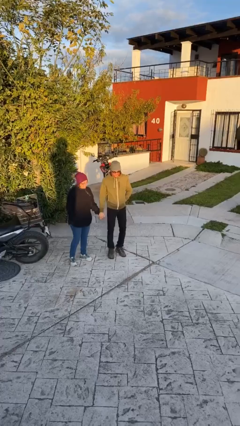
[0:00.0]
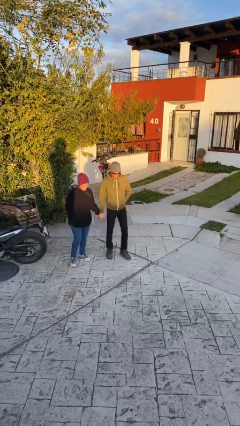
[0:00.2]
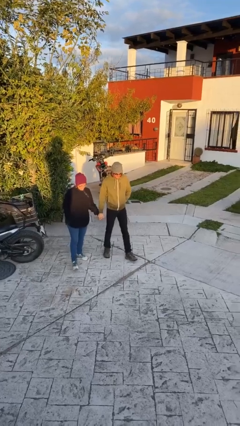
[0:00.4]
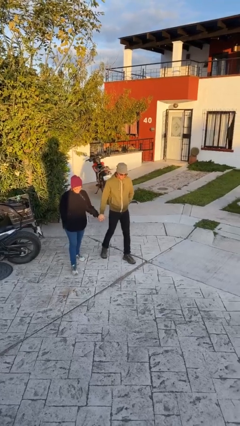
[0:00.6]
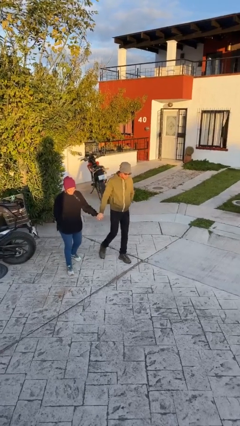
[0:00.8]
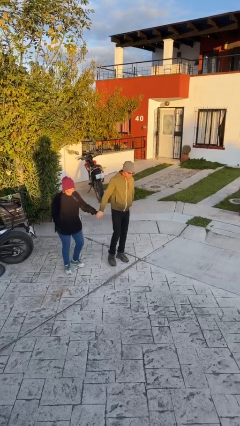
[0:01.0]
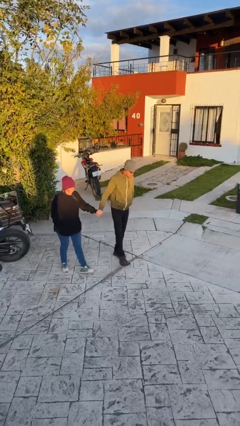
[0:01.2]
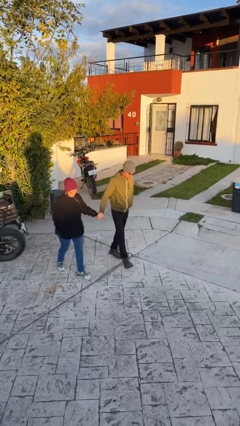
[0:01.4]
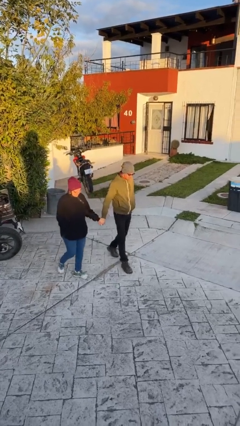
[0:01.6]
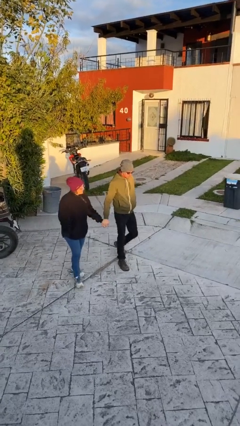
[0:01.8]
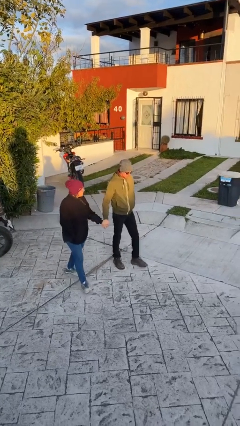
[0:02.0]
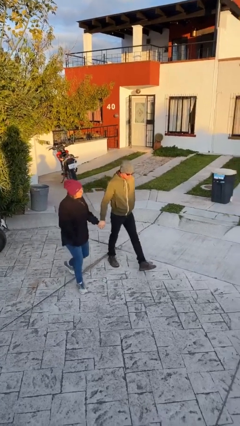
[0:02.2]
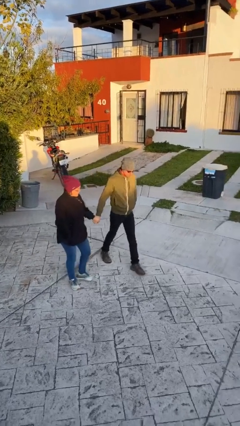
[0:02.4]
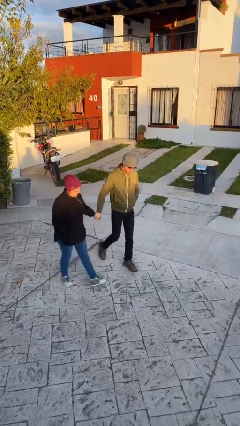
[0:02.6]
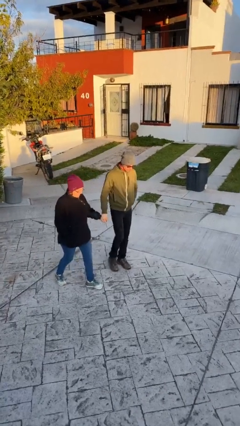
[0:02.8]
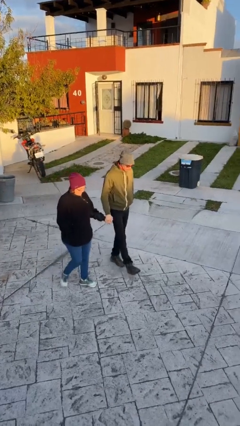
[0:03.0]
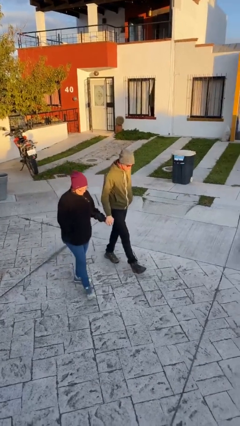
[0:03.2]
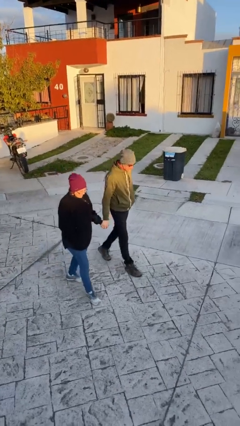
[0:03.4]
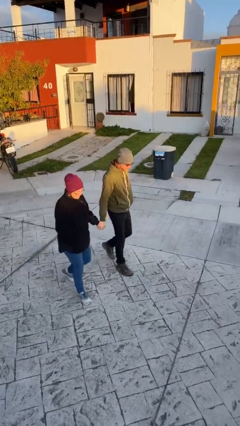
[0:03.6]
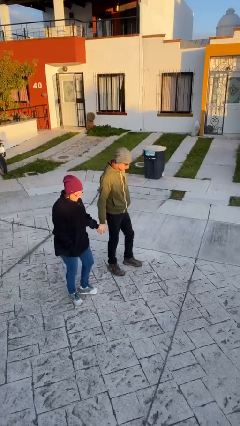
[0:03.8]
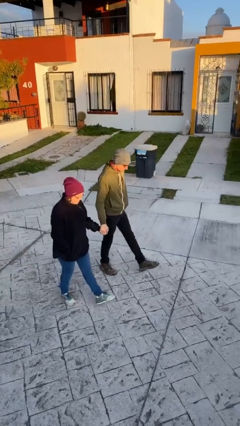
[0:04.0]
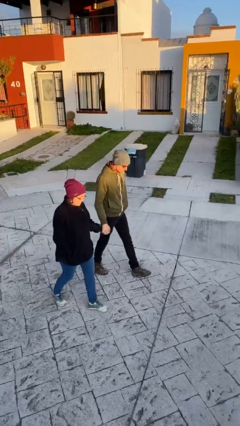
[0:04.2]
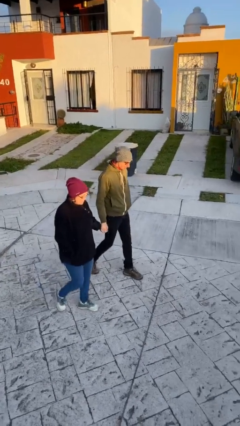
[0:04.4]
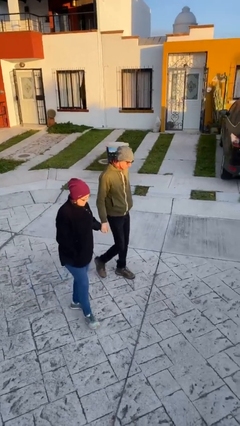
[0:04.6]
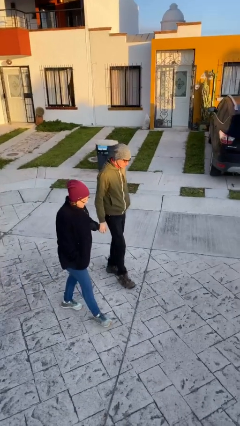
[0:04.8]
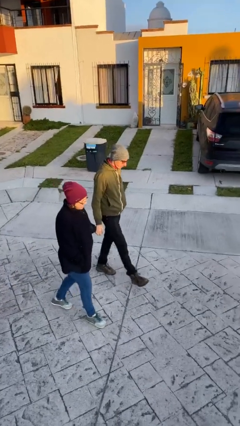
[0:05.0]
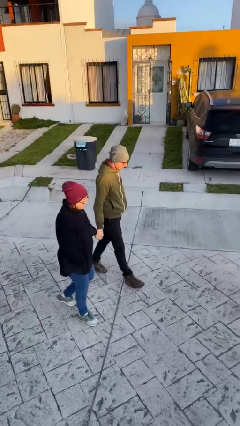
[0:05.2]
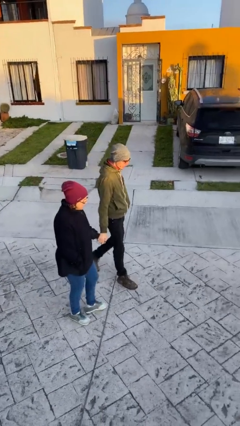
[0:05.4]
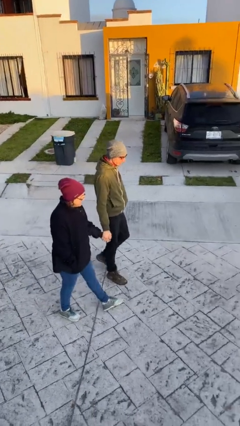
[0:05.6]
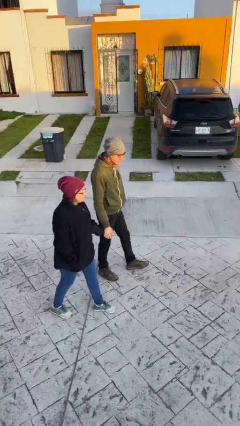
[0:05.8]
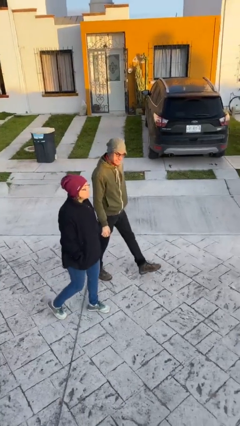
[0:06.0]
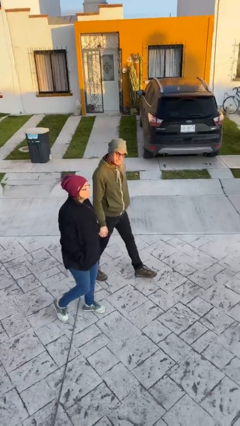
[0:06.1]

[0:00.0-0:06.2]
person holds hand

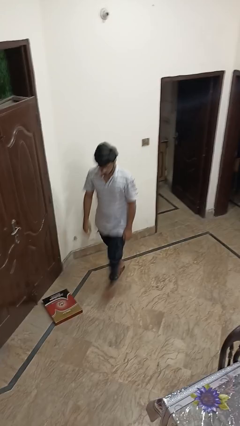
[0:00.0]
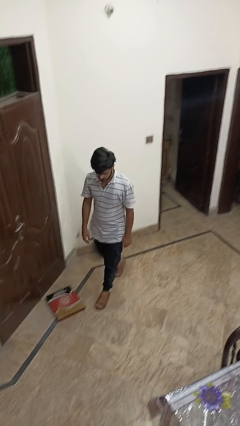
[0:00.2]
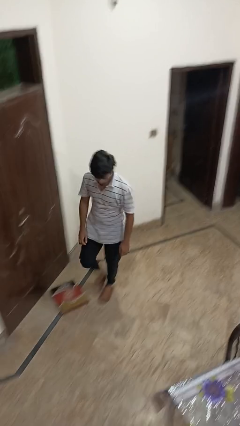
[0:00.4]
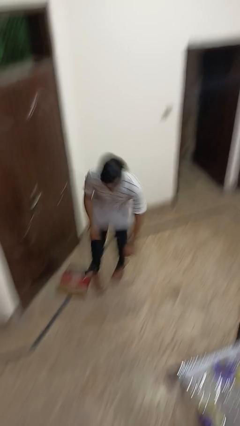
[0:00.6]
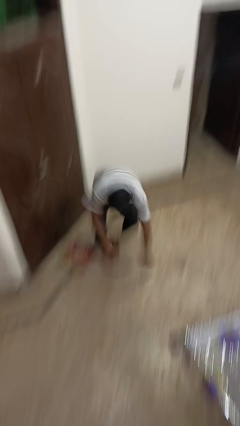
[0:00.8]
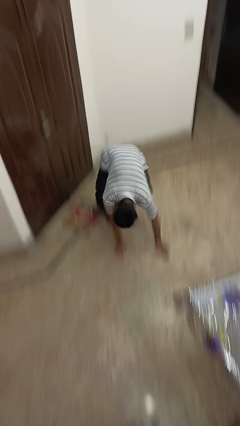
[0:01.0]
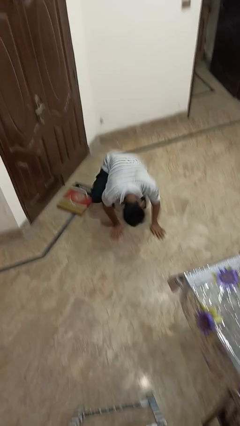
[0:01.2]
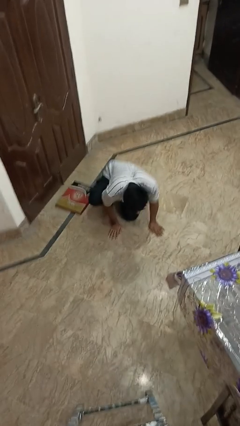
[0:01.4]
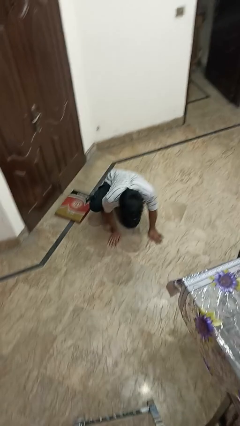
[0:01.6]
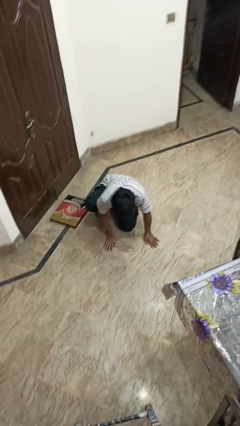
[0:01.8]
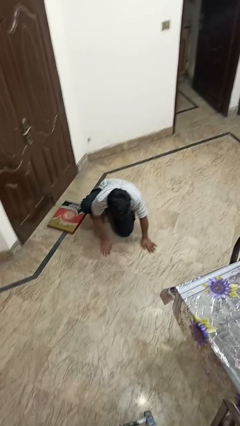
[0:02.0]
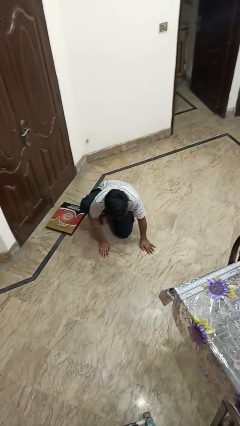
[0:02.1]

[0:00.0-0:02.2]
person trips on object on floor

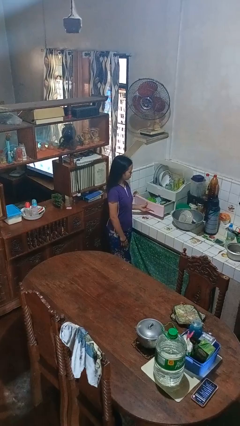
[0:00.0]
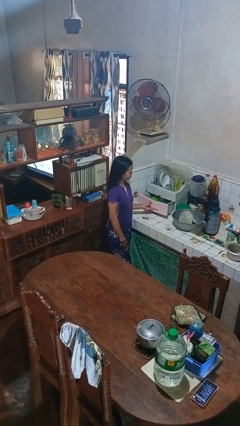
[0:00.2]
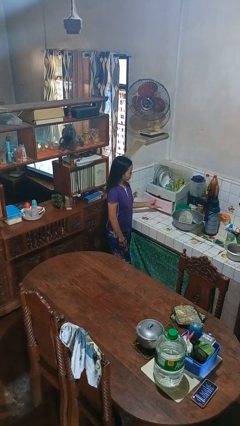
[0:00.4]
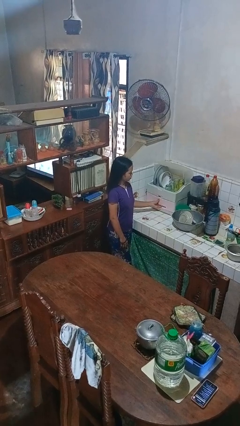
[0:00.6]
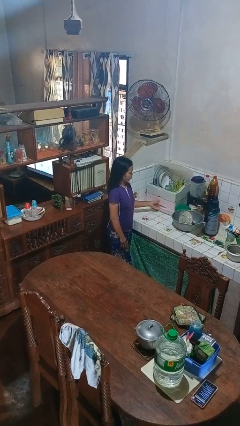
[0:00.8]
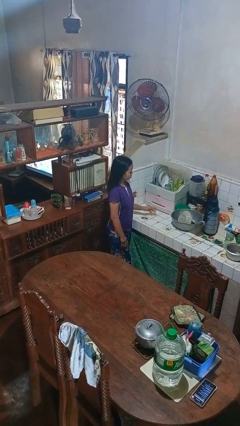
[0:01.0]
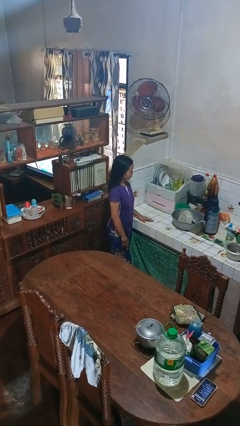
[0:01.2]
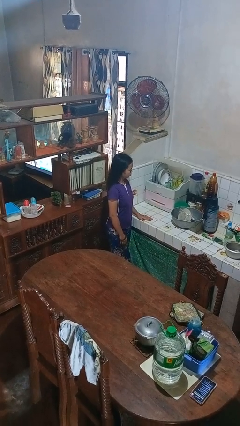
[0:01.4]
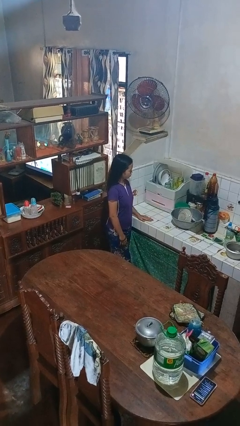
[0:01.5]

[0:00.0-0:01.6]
person closes kitchen drawer

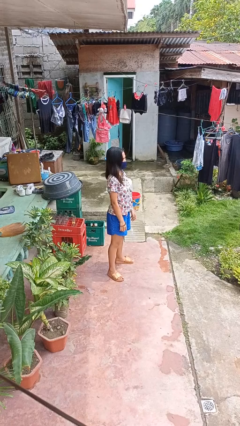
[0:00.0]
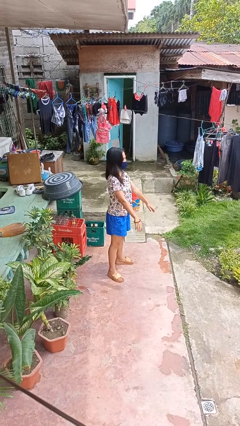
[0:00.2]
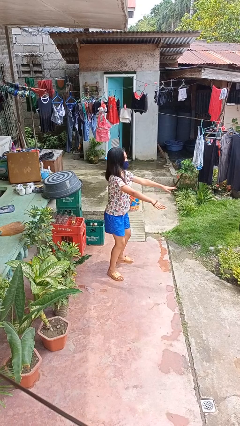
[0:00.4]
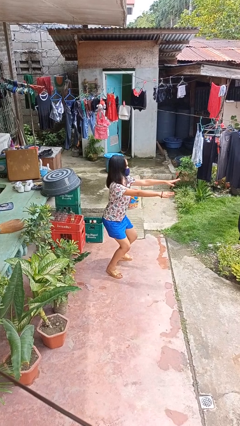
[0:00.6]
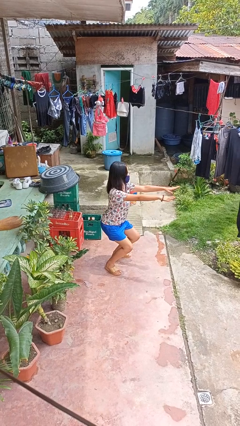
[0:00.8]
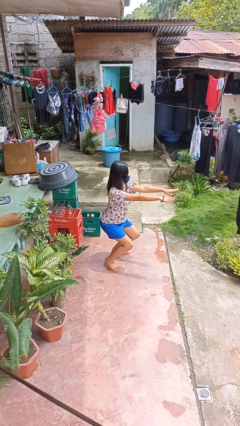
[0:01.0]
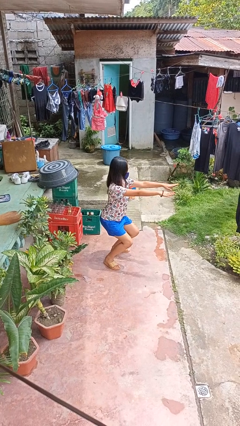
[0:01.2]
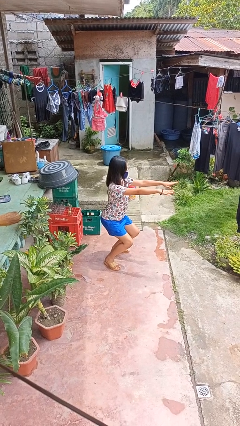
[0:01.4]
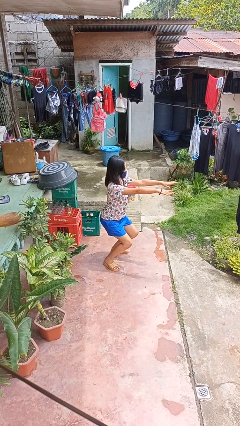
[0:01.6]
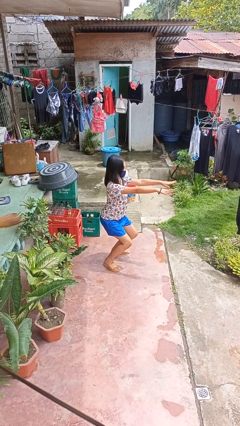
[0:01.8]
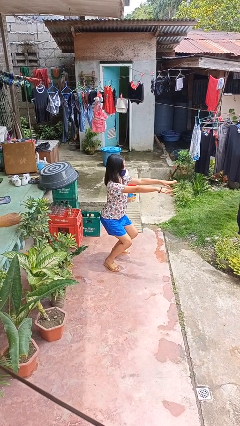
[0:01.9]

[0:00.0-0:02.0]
person squats

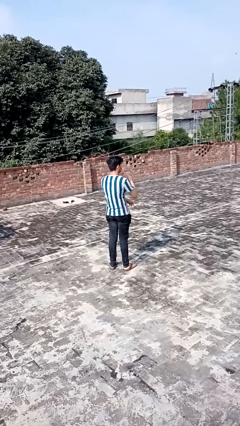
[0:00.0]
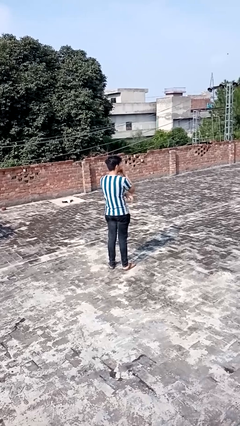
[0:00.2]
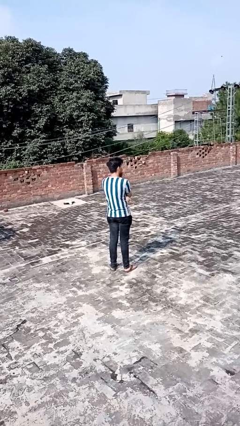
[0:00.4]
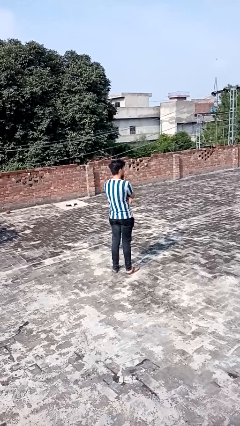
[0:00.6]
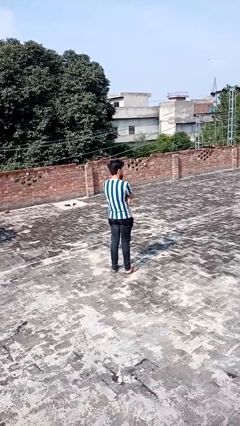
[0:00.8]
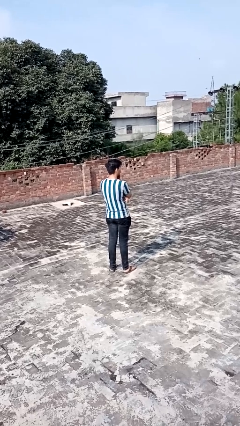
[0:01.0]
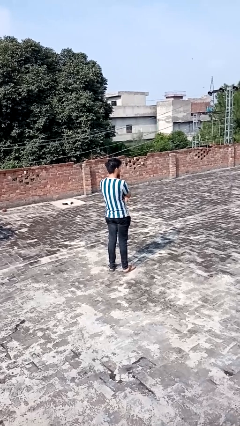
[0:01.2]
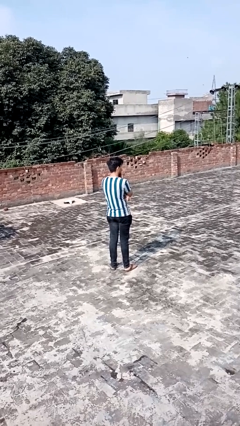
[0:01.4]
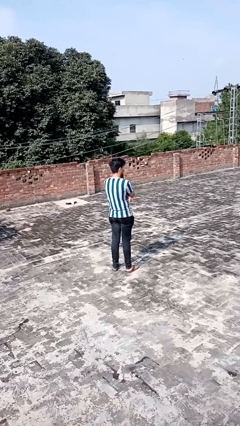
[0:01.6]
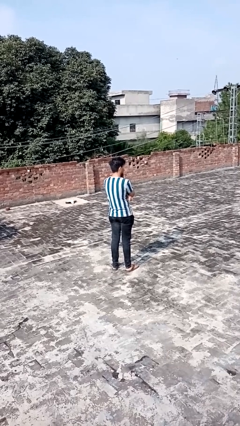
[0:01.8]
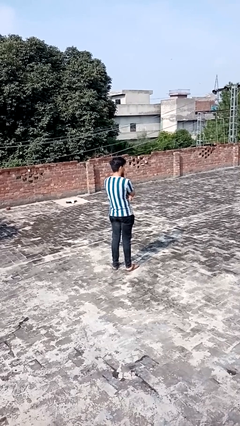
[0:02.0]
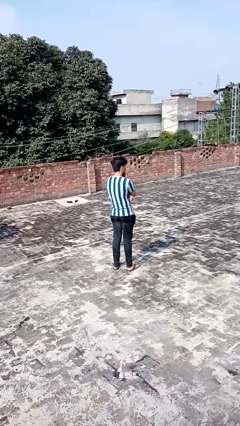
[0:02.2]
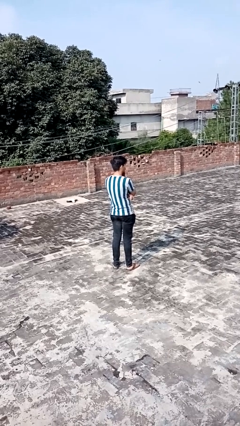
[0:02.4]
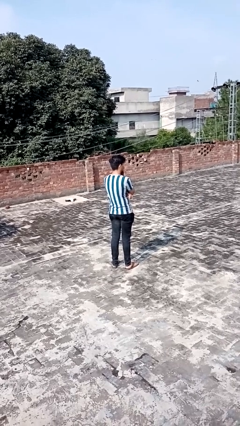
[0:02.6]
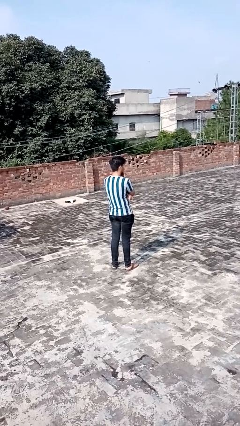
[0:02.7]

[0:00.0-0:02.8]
person strokes chin

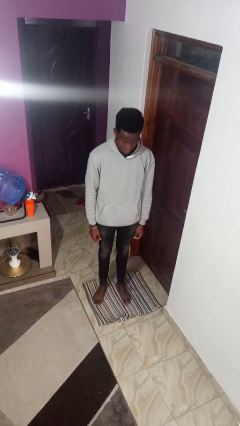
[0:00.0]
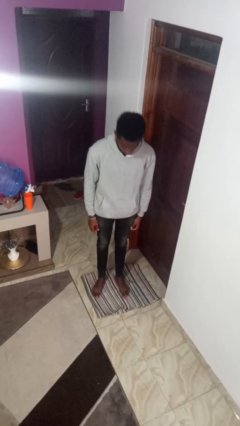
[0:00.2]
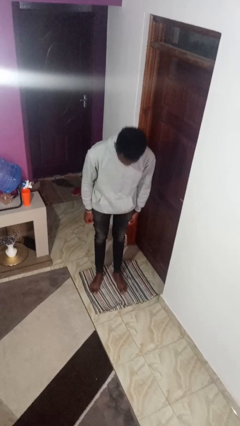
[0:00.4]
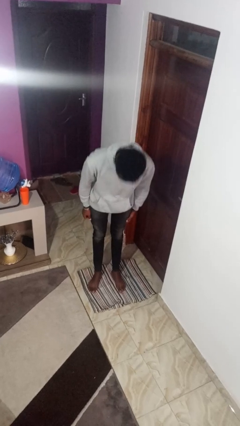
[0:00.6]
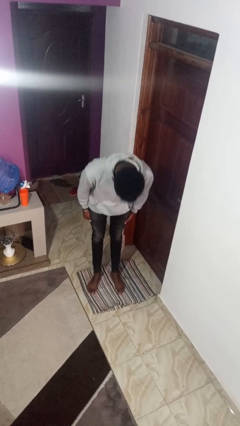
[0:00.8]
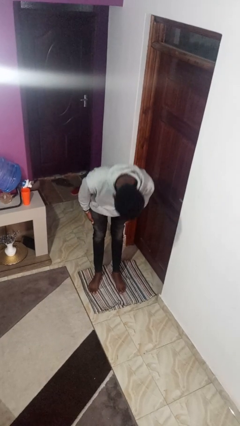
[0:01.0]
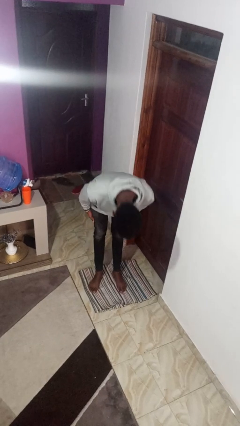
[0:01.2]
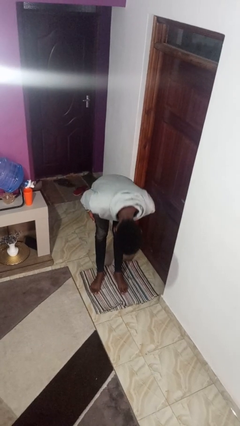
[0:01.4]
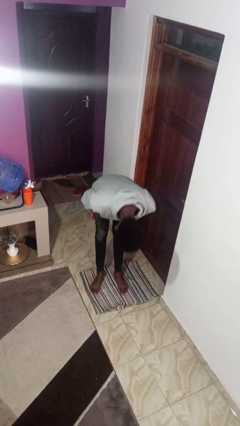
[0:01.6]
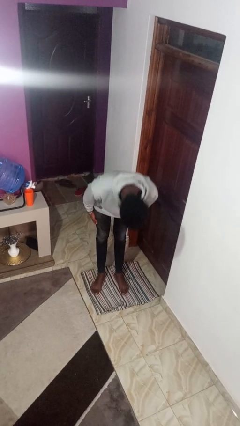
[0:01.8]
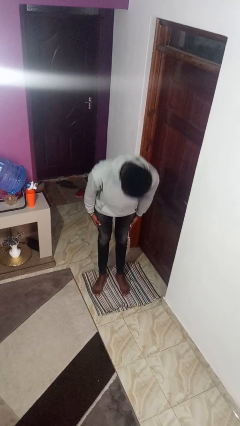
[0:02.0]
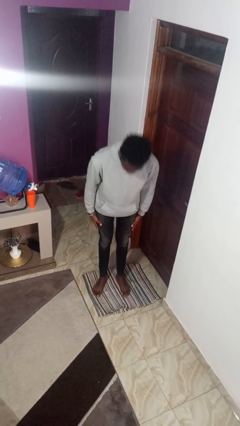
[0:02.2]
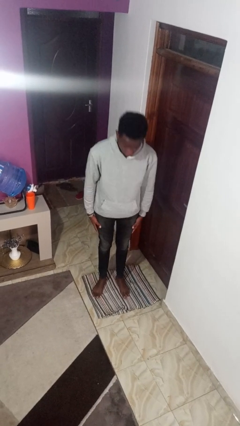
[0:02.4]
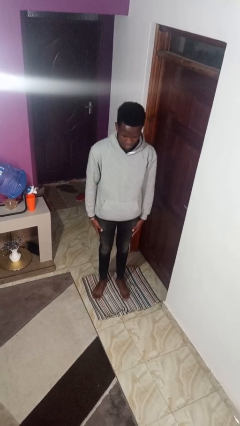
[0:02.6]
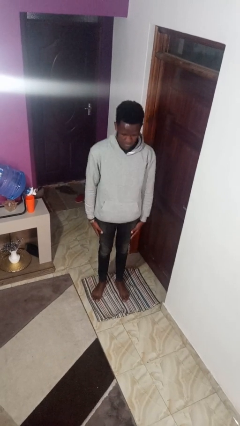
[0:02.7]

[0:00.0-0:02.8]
person bows
